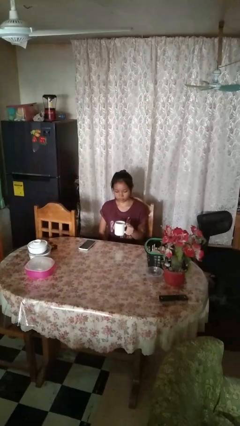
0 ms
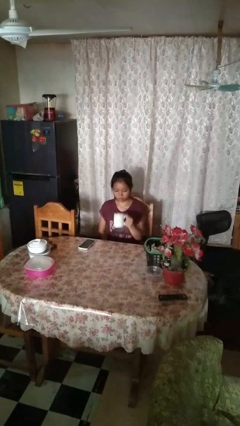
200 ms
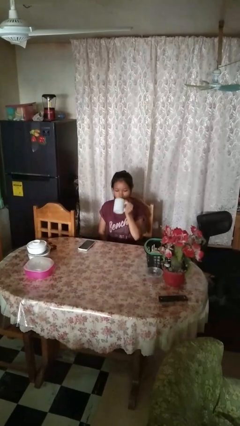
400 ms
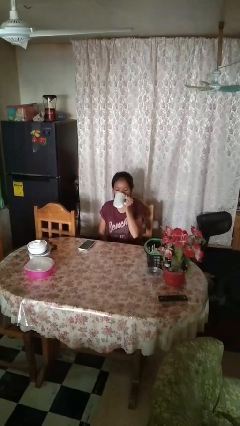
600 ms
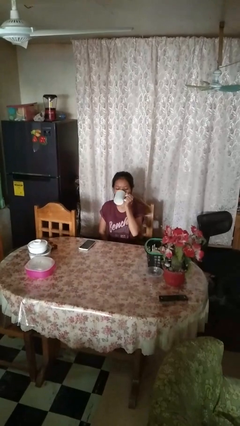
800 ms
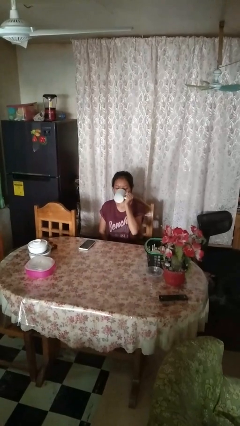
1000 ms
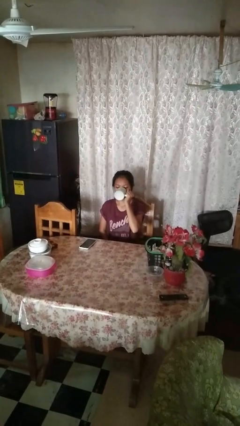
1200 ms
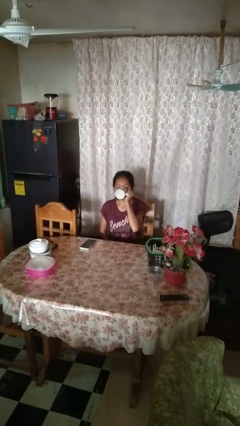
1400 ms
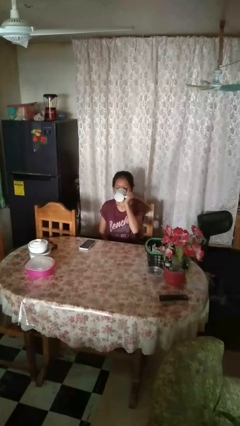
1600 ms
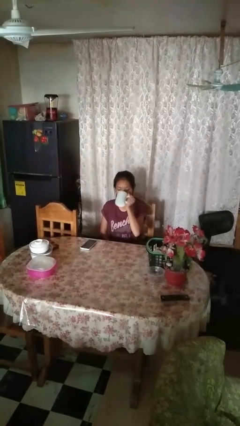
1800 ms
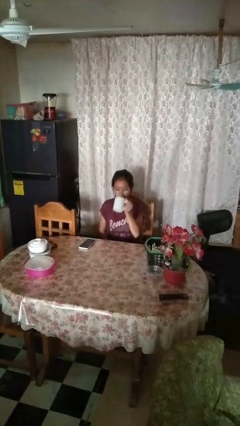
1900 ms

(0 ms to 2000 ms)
person drinks from mug

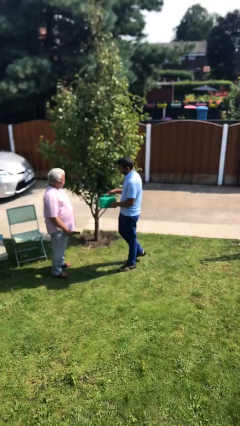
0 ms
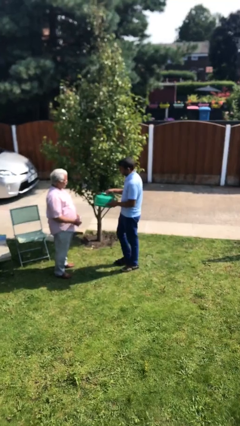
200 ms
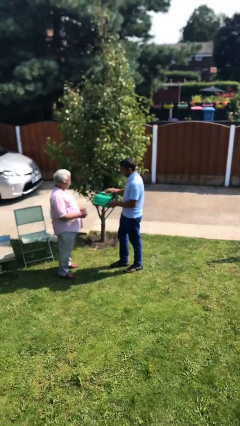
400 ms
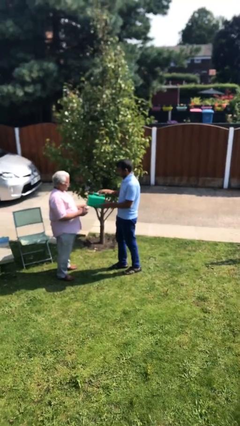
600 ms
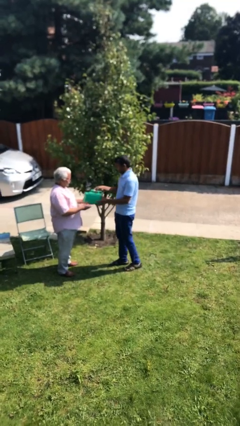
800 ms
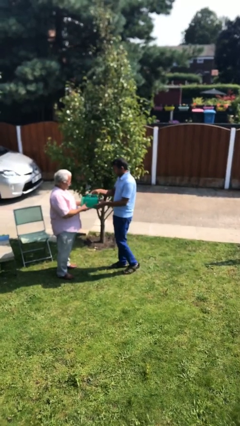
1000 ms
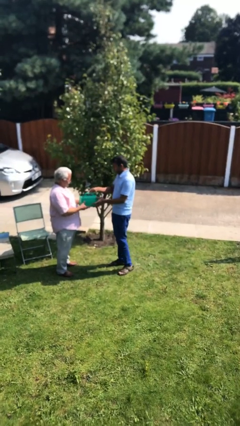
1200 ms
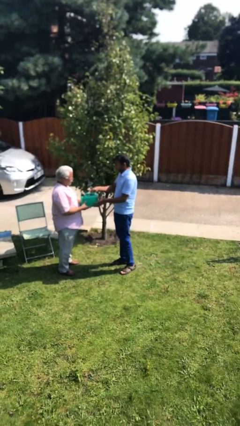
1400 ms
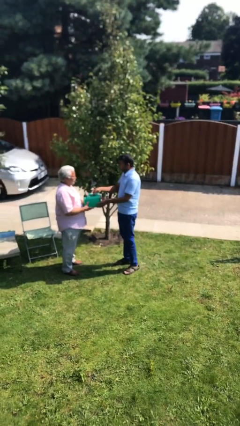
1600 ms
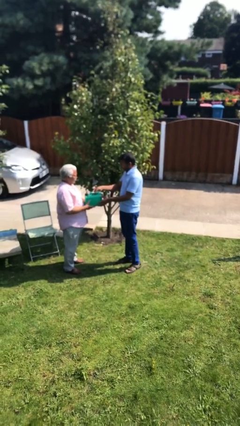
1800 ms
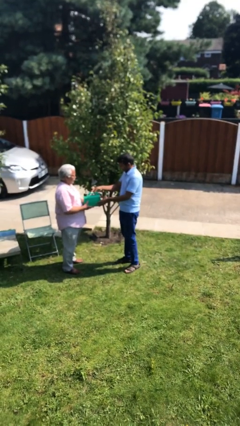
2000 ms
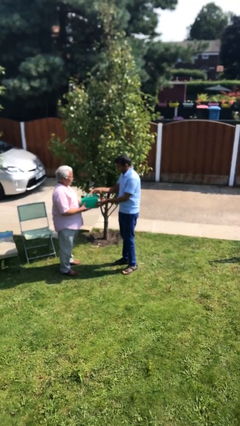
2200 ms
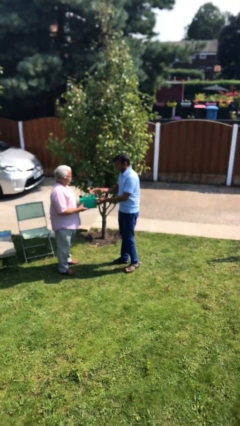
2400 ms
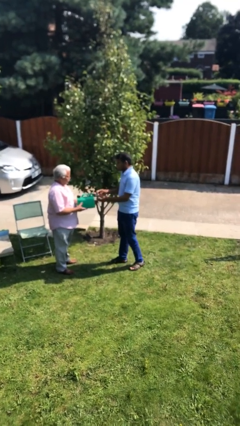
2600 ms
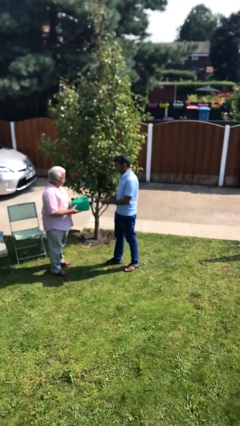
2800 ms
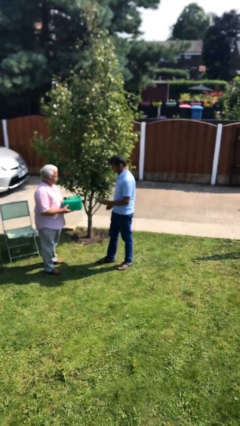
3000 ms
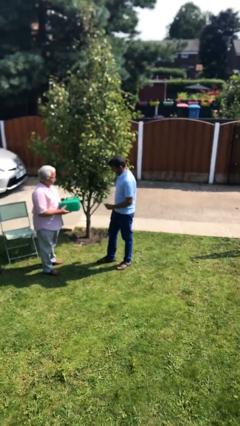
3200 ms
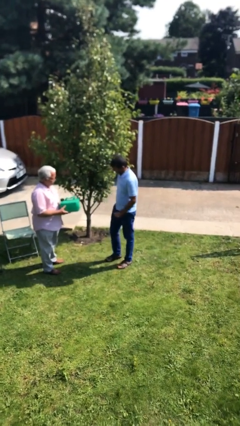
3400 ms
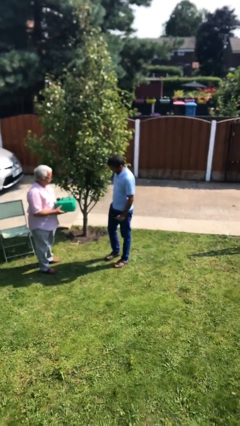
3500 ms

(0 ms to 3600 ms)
person transfers object to person

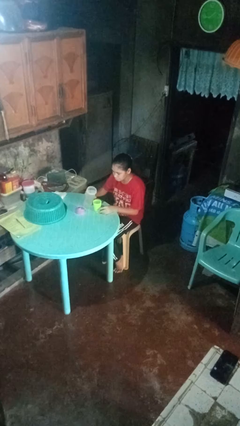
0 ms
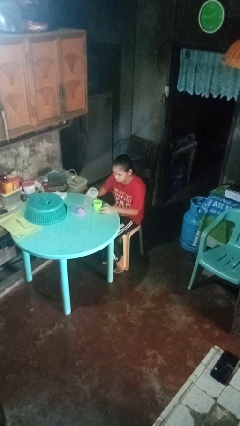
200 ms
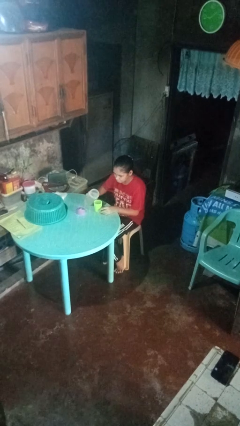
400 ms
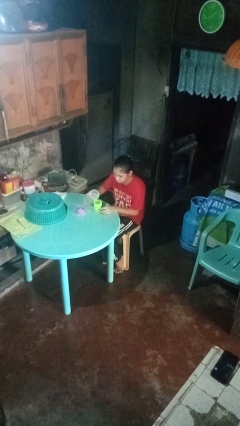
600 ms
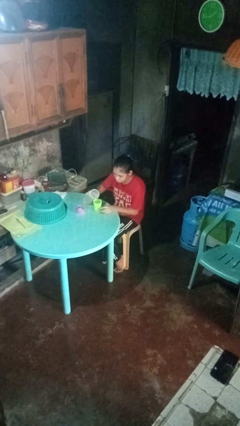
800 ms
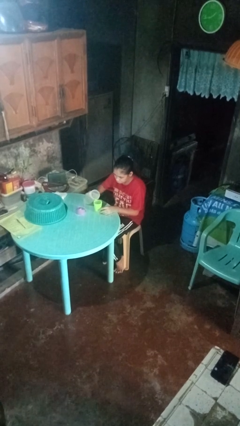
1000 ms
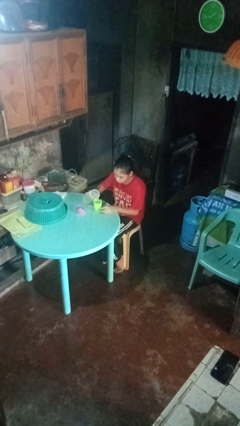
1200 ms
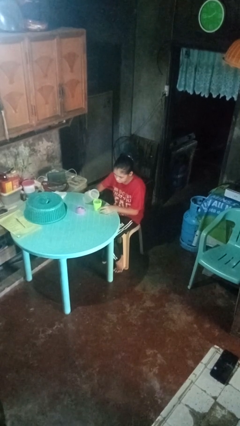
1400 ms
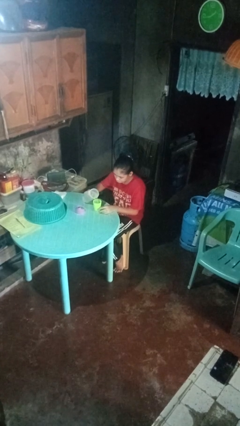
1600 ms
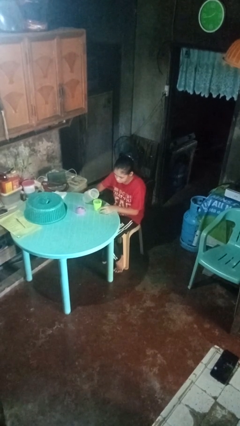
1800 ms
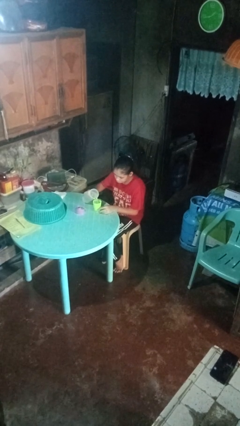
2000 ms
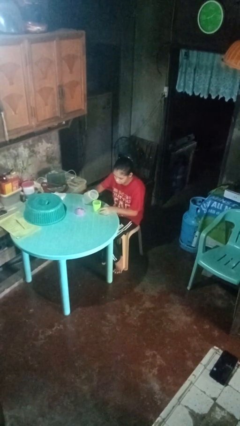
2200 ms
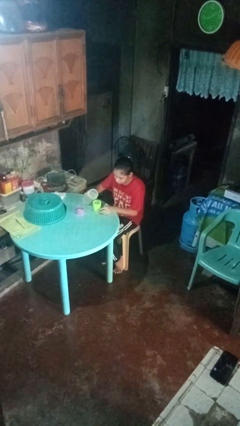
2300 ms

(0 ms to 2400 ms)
person pours liquid into cup

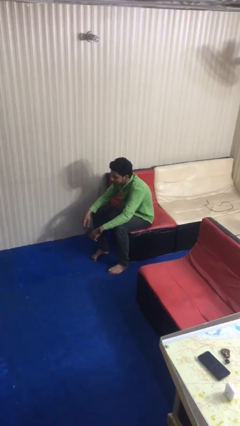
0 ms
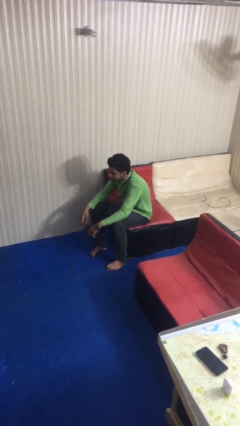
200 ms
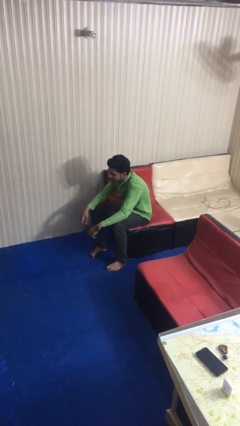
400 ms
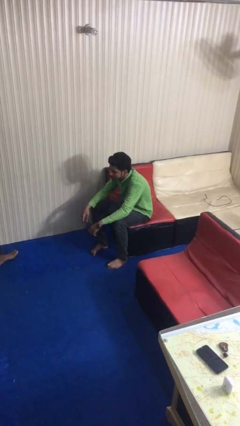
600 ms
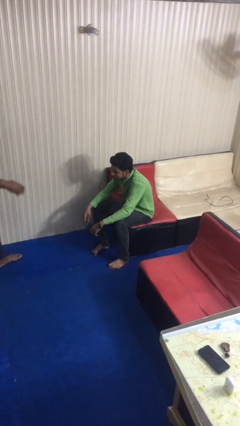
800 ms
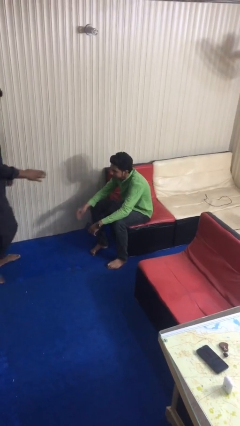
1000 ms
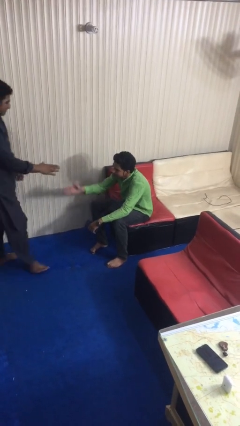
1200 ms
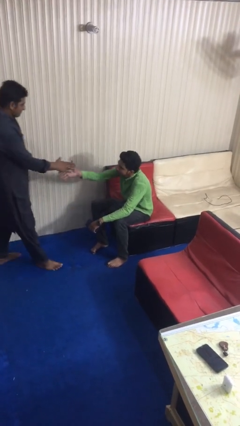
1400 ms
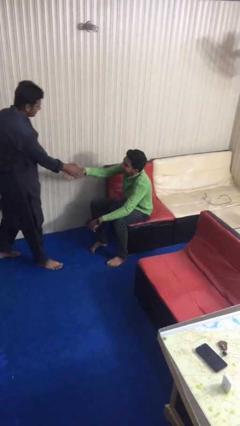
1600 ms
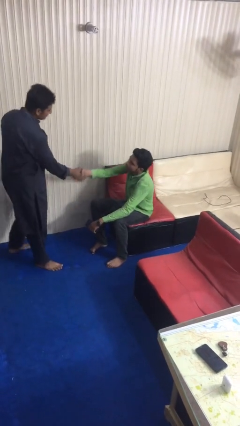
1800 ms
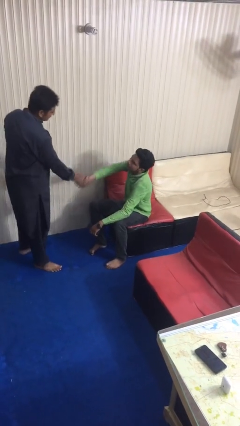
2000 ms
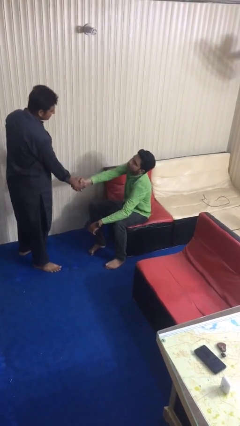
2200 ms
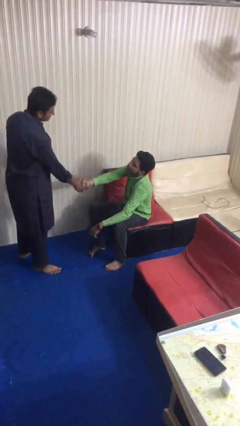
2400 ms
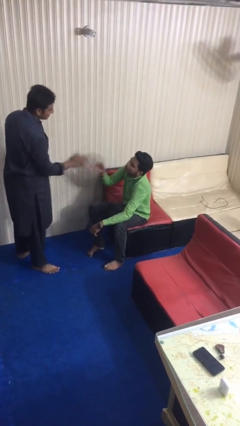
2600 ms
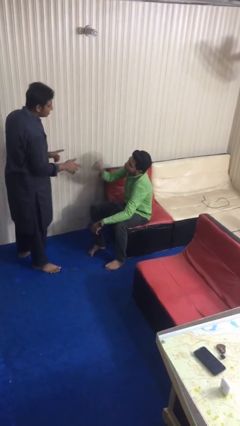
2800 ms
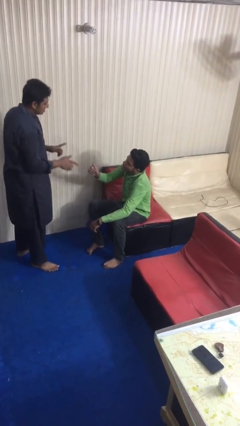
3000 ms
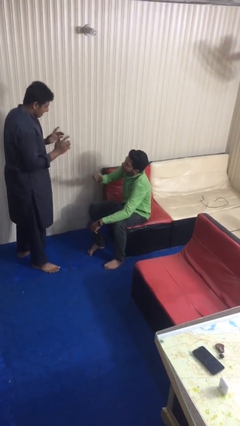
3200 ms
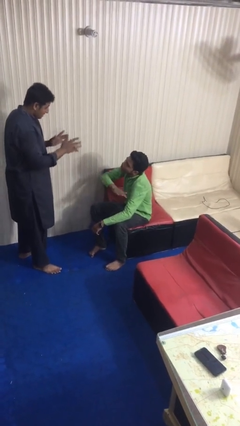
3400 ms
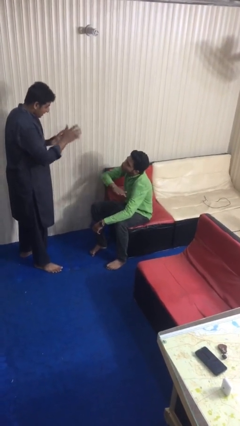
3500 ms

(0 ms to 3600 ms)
person shakes hand

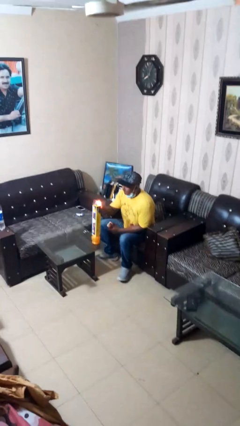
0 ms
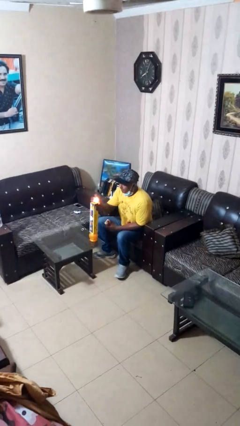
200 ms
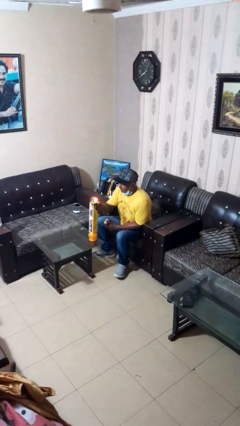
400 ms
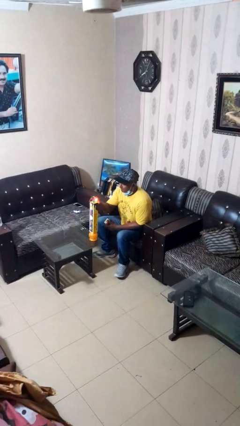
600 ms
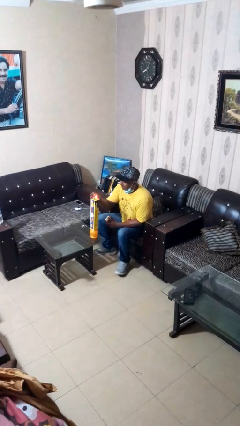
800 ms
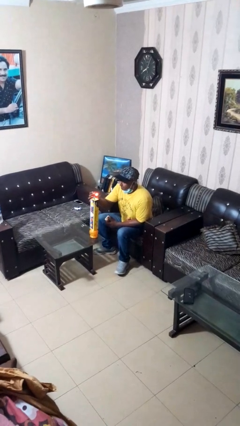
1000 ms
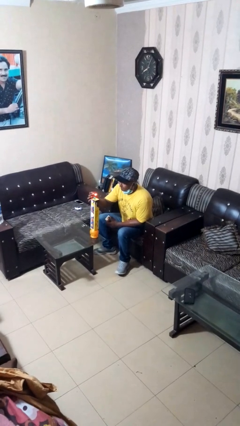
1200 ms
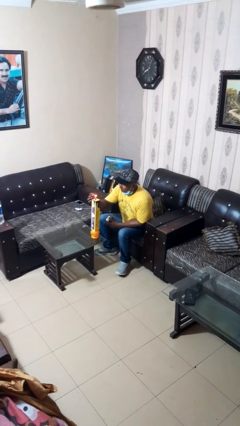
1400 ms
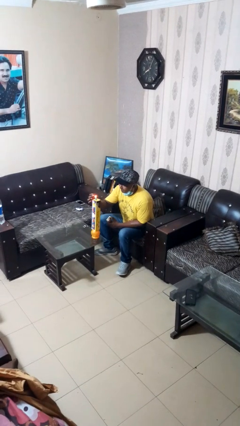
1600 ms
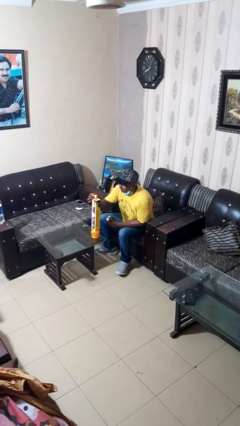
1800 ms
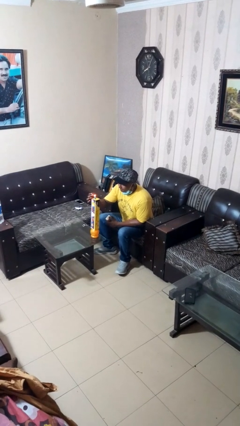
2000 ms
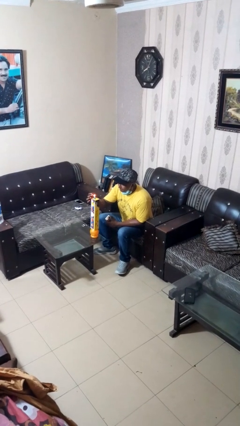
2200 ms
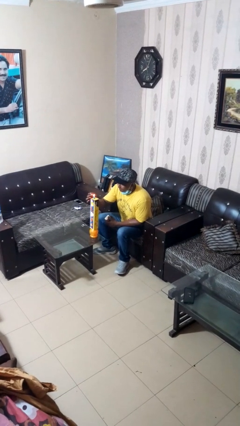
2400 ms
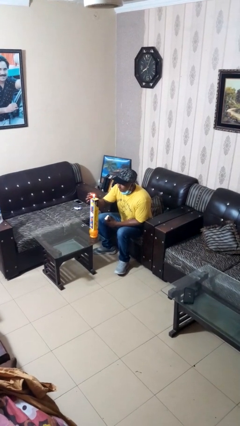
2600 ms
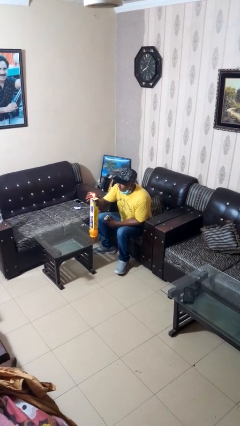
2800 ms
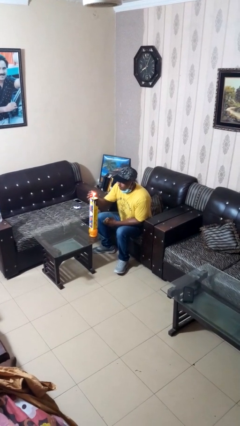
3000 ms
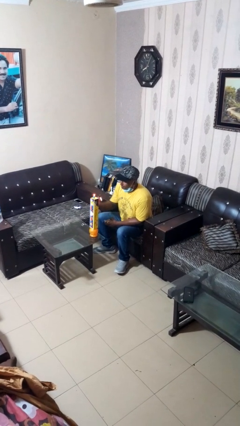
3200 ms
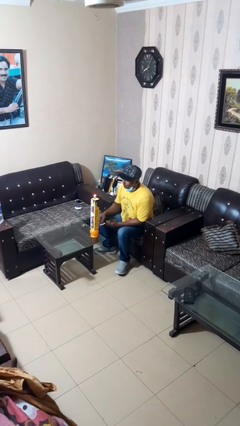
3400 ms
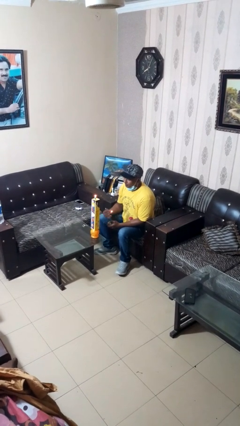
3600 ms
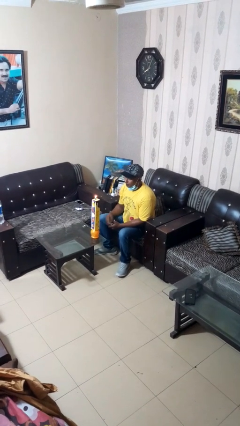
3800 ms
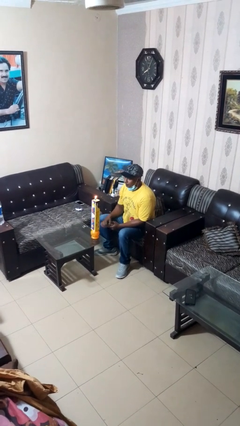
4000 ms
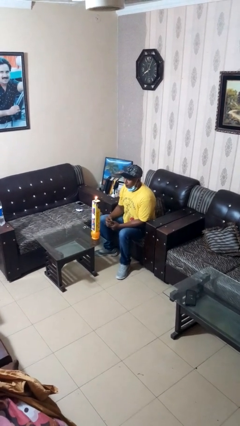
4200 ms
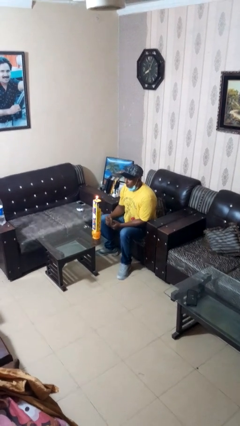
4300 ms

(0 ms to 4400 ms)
person lights candle

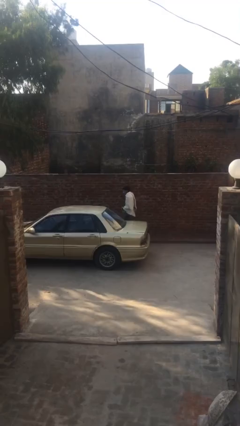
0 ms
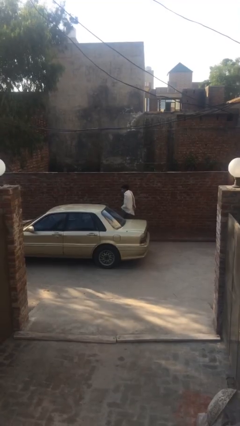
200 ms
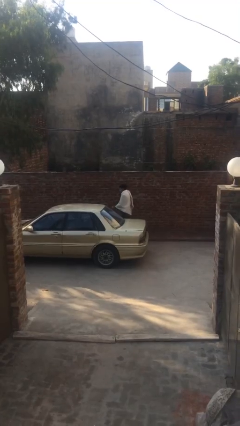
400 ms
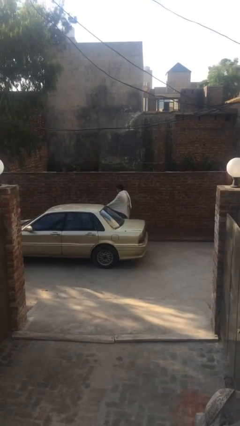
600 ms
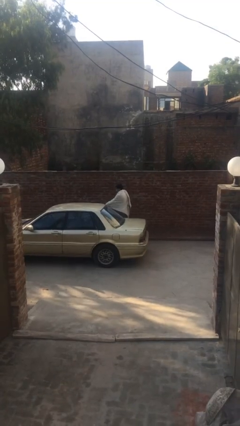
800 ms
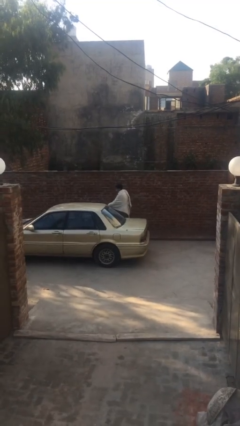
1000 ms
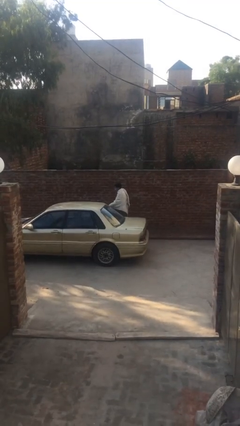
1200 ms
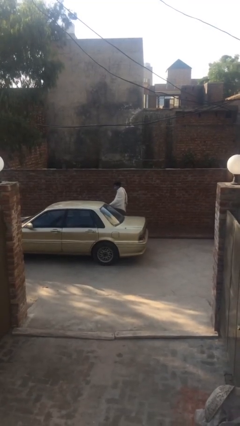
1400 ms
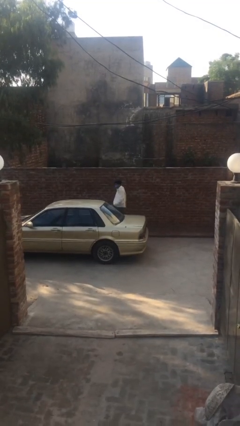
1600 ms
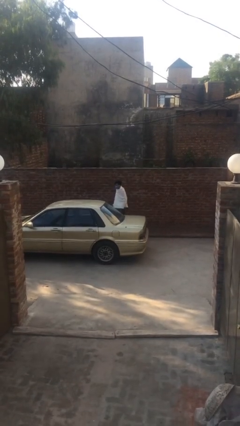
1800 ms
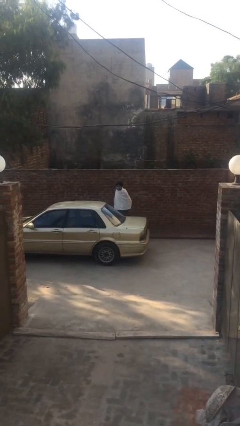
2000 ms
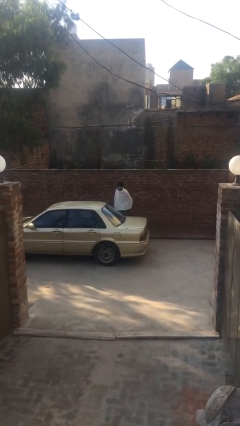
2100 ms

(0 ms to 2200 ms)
person closes car door
